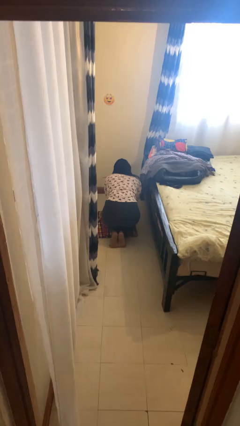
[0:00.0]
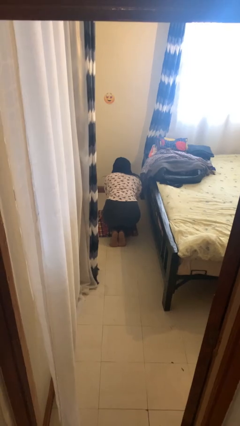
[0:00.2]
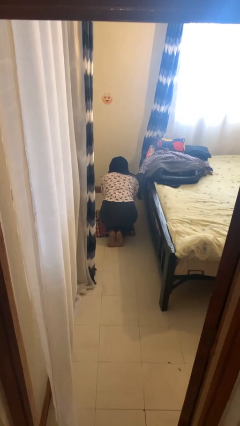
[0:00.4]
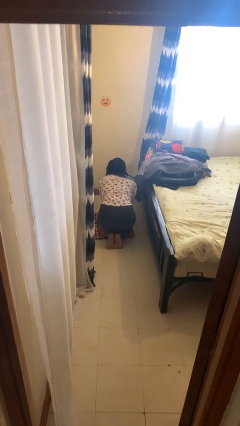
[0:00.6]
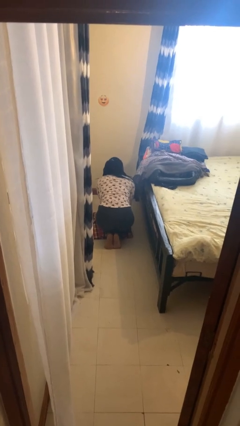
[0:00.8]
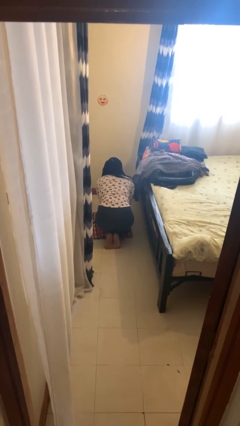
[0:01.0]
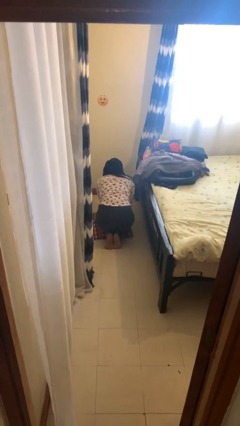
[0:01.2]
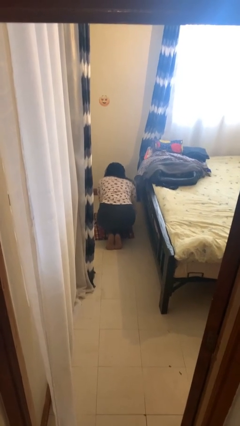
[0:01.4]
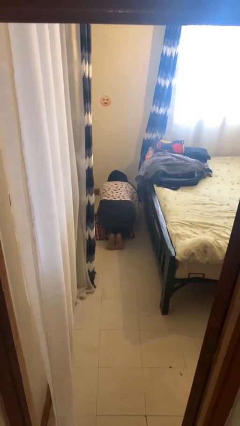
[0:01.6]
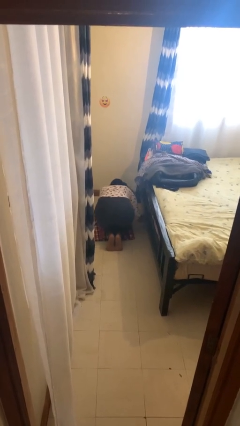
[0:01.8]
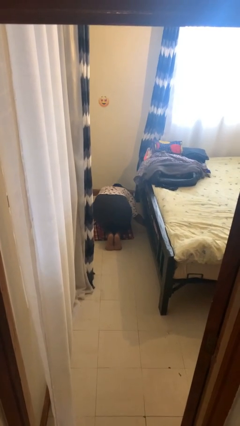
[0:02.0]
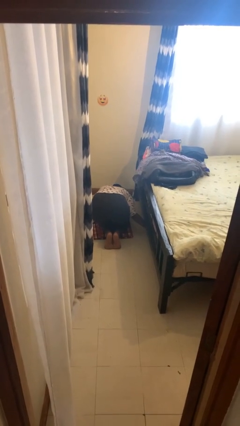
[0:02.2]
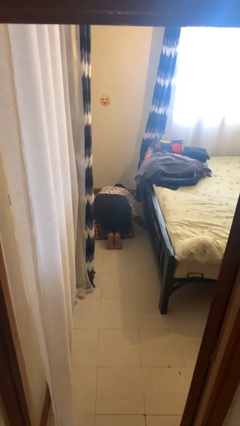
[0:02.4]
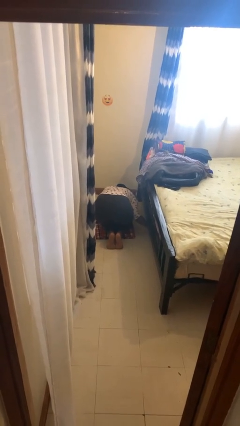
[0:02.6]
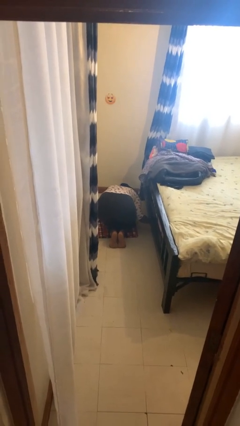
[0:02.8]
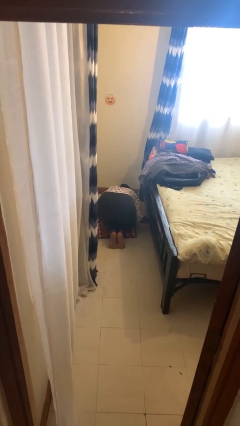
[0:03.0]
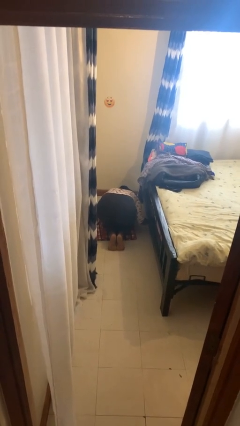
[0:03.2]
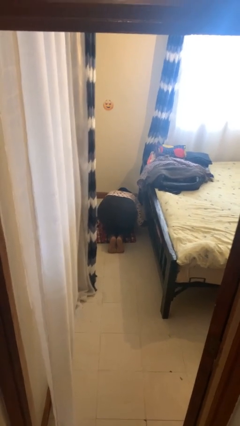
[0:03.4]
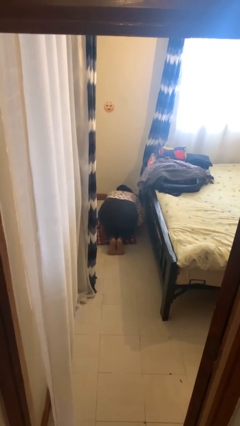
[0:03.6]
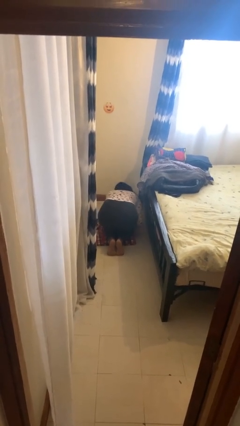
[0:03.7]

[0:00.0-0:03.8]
person searches under bed

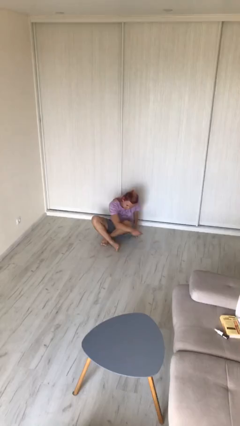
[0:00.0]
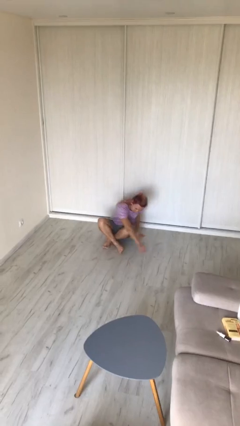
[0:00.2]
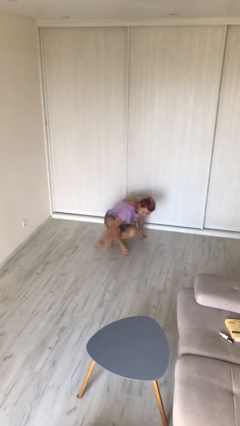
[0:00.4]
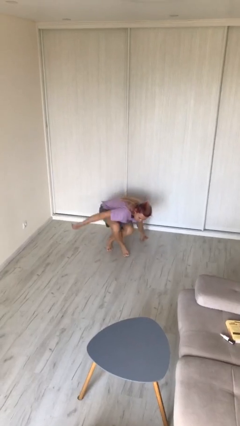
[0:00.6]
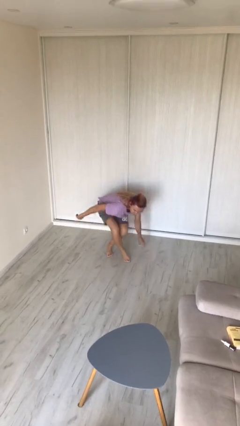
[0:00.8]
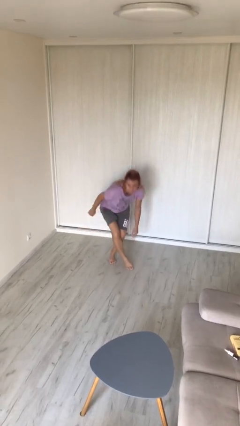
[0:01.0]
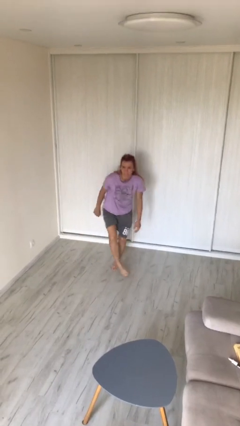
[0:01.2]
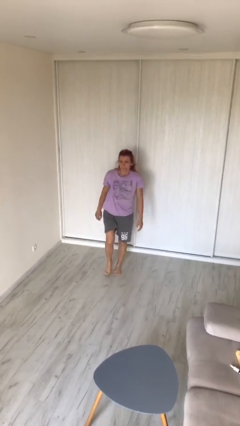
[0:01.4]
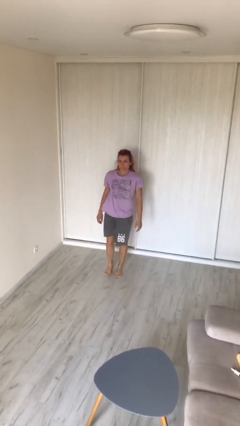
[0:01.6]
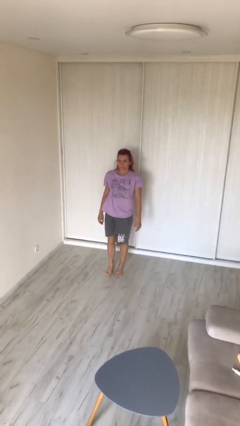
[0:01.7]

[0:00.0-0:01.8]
person stands up from floor

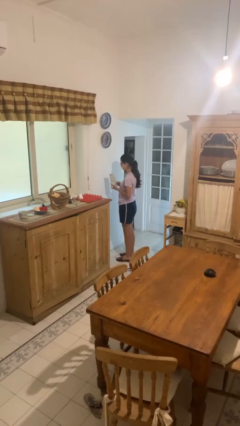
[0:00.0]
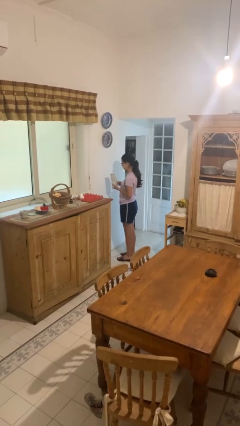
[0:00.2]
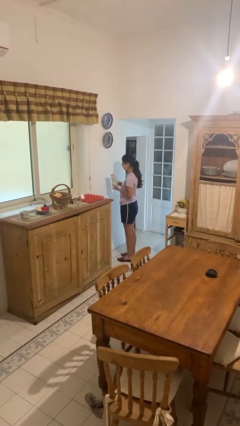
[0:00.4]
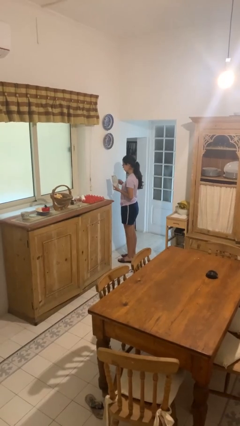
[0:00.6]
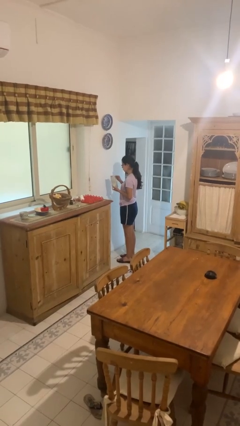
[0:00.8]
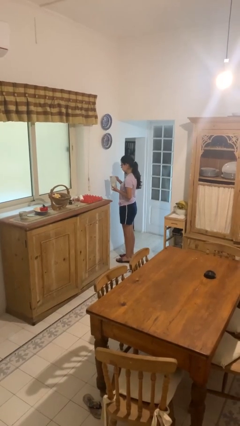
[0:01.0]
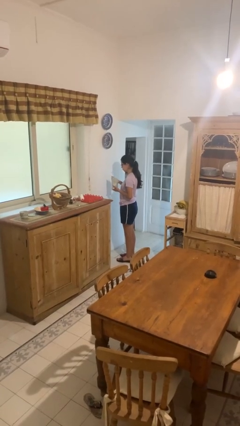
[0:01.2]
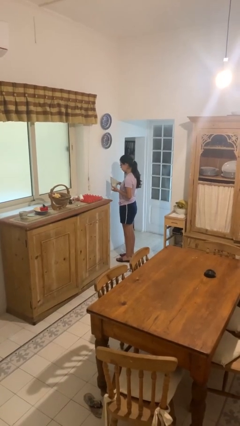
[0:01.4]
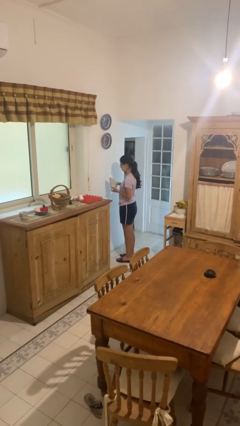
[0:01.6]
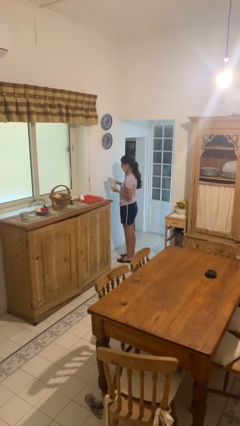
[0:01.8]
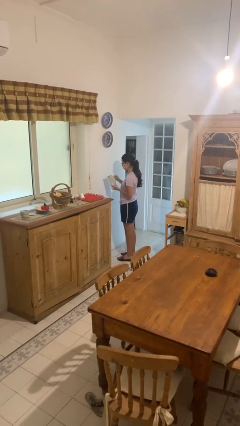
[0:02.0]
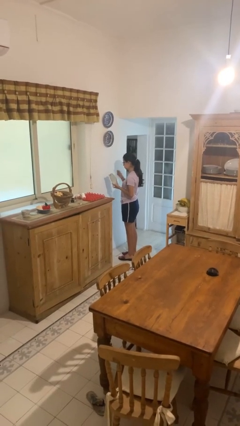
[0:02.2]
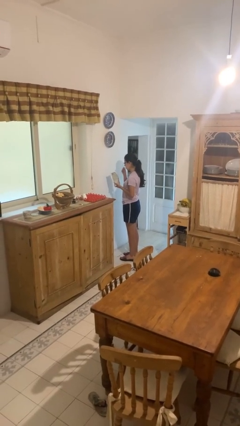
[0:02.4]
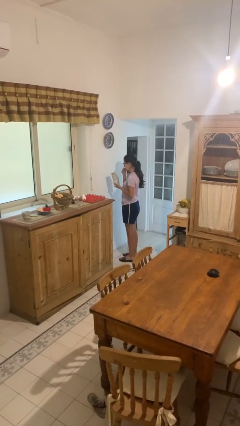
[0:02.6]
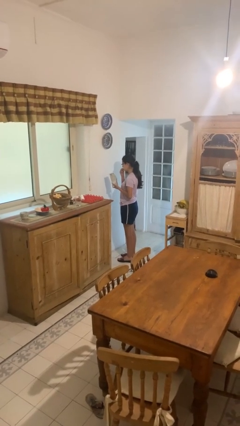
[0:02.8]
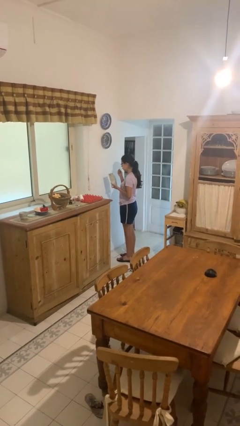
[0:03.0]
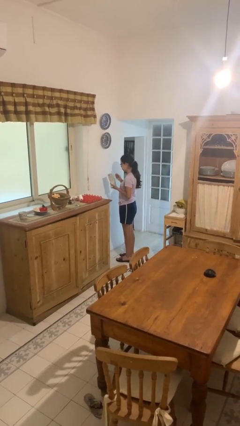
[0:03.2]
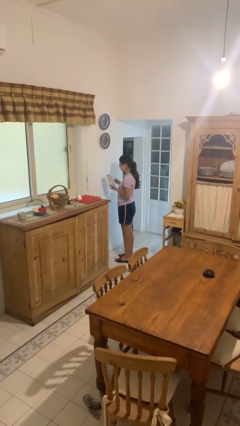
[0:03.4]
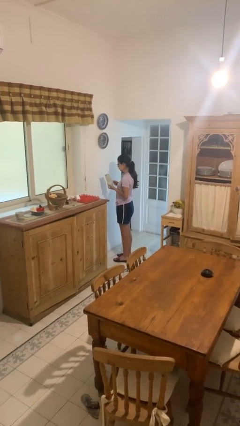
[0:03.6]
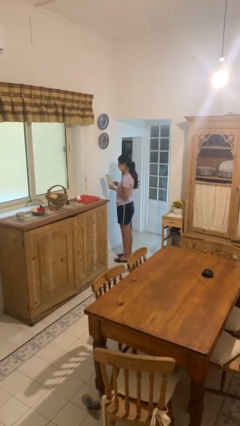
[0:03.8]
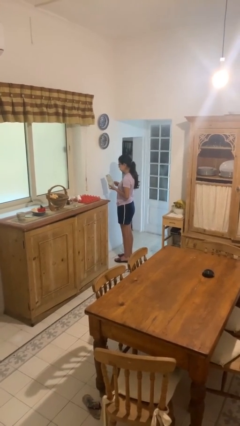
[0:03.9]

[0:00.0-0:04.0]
person eats snack from bag

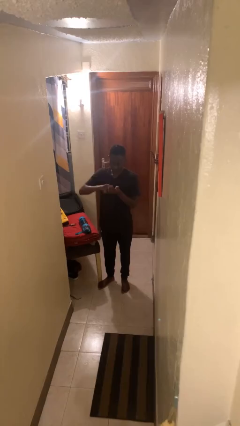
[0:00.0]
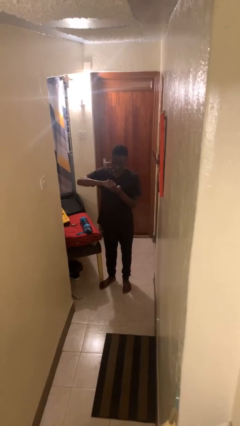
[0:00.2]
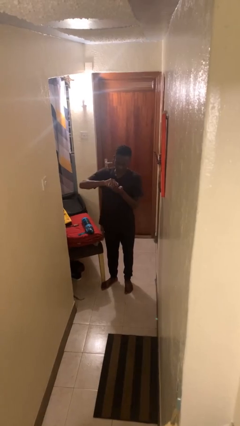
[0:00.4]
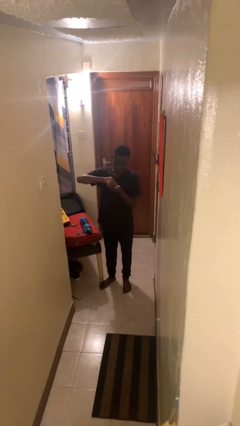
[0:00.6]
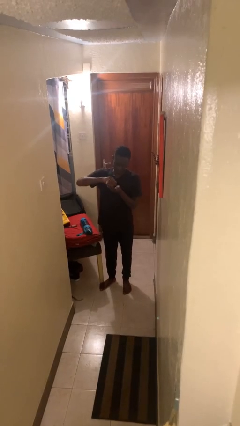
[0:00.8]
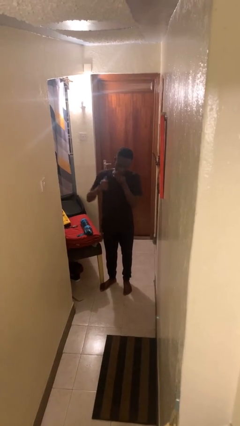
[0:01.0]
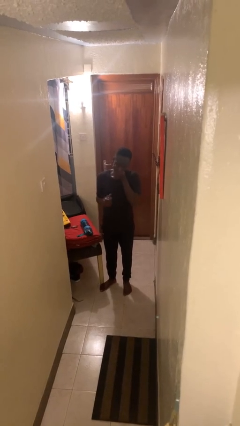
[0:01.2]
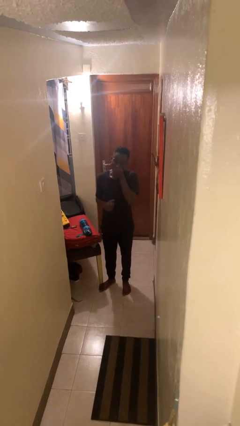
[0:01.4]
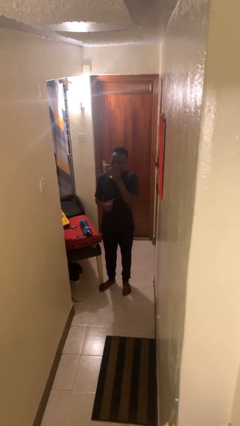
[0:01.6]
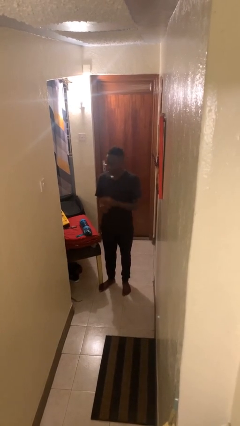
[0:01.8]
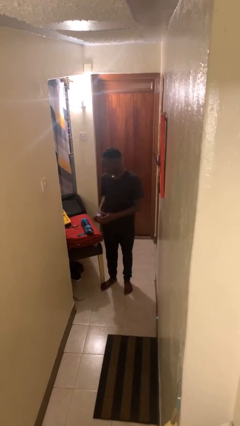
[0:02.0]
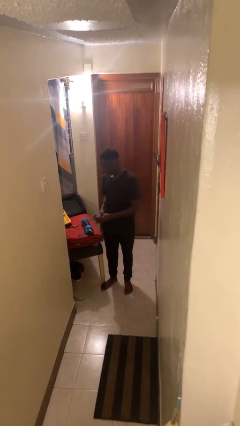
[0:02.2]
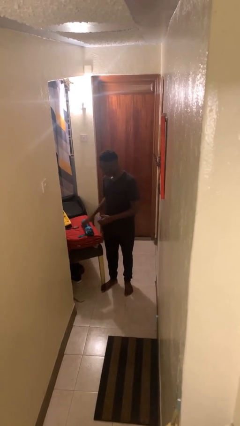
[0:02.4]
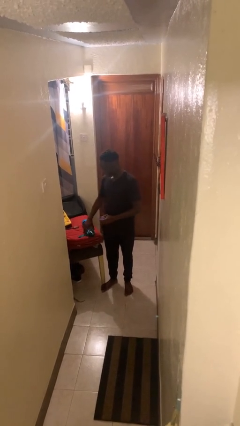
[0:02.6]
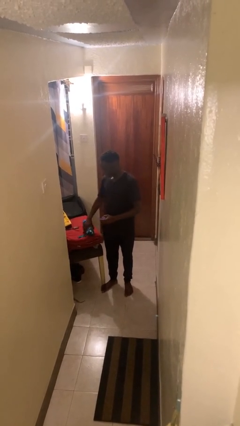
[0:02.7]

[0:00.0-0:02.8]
person takes medicine pills

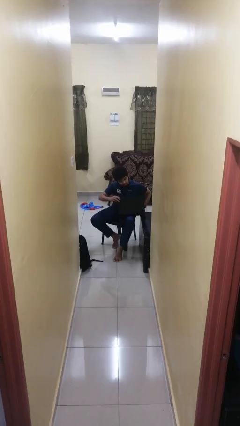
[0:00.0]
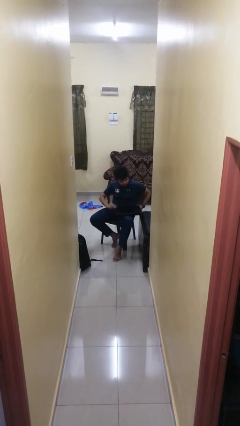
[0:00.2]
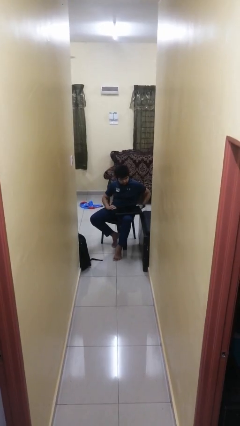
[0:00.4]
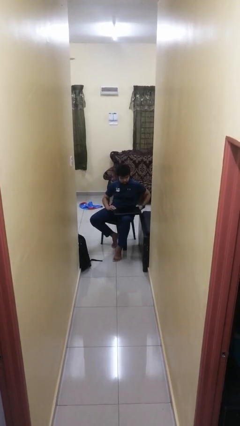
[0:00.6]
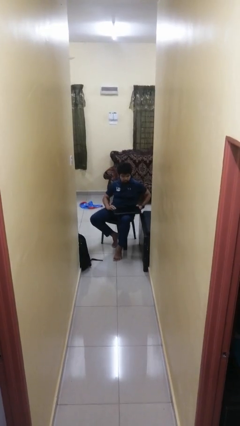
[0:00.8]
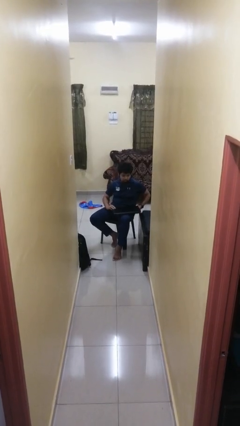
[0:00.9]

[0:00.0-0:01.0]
person closes laptop

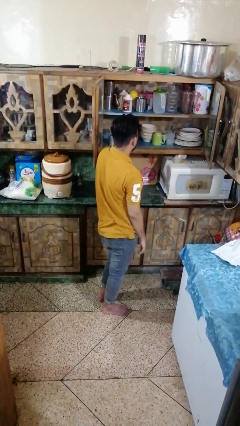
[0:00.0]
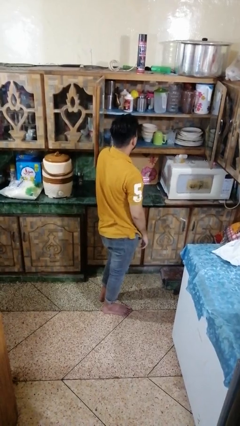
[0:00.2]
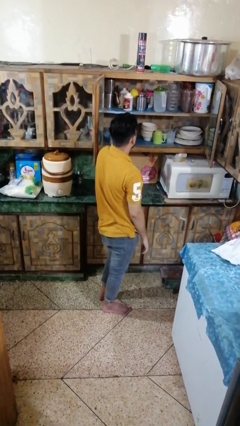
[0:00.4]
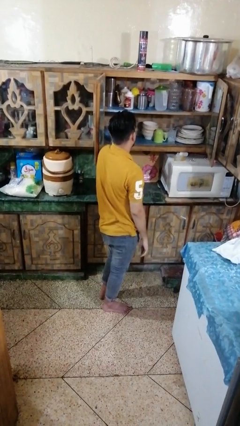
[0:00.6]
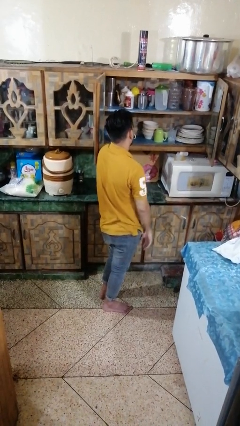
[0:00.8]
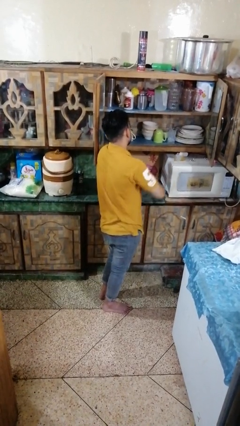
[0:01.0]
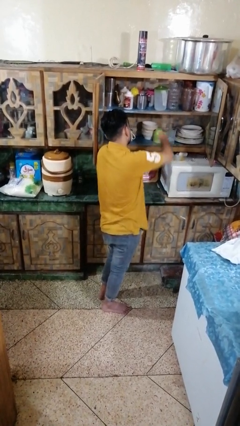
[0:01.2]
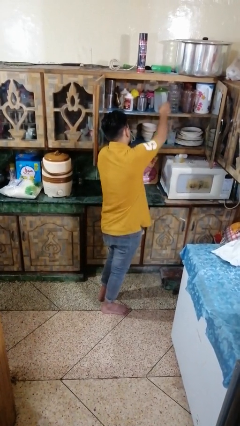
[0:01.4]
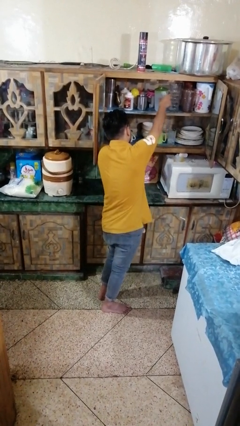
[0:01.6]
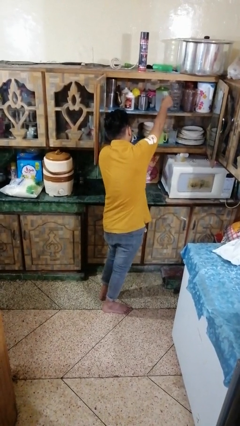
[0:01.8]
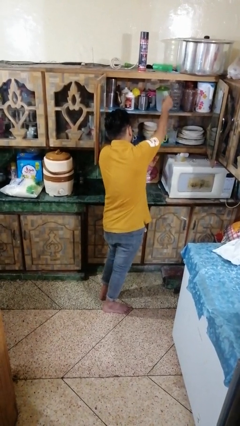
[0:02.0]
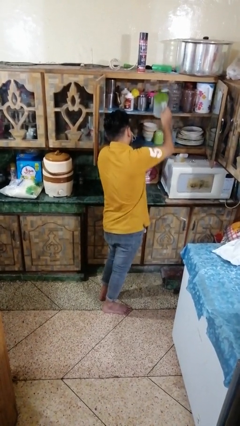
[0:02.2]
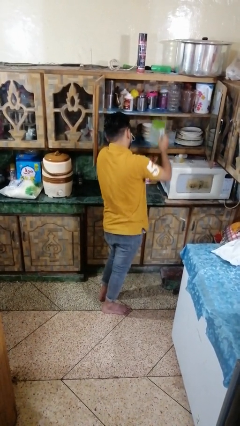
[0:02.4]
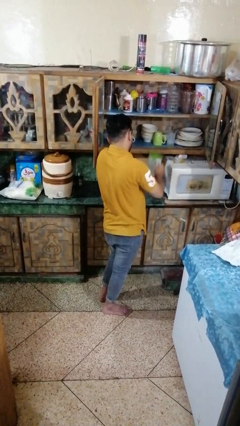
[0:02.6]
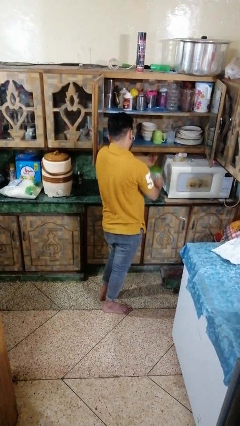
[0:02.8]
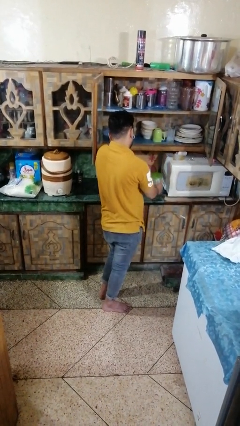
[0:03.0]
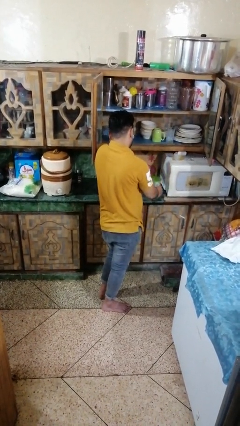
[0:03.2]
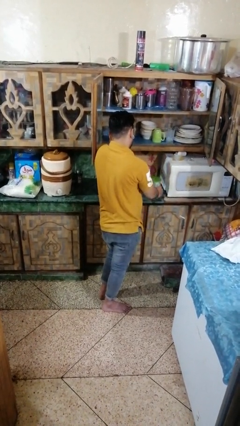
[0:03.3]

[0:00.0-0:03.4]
person takes object from cabinet

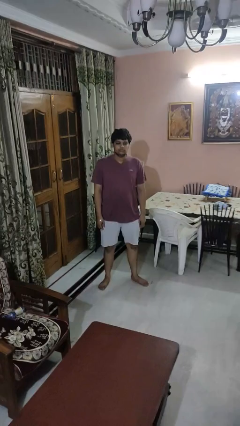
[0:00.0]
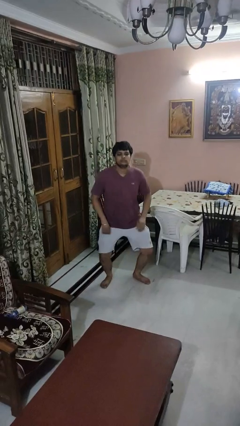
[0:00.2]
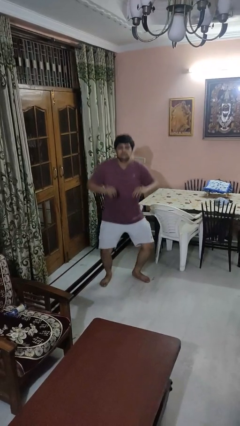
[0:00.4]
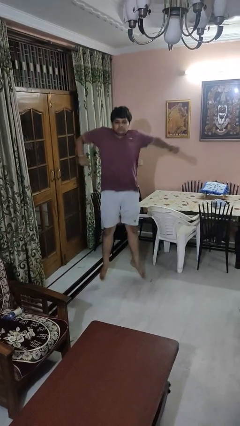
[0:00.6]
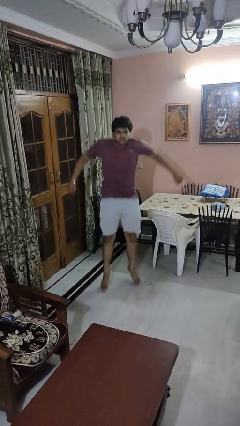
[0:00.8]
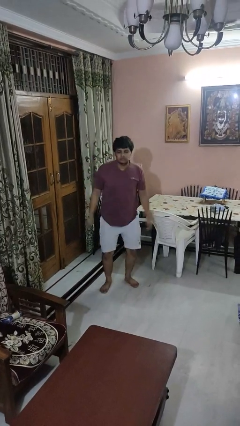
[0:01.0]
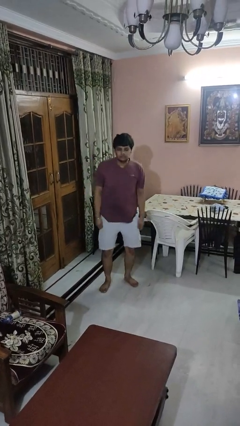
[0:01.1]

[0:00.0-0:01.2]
person jumps
